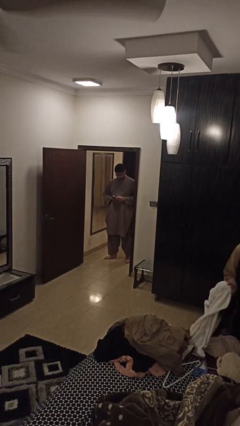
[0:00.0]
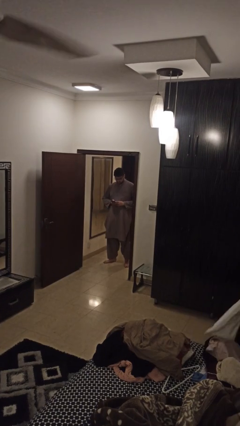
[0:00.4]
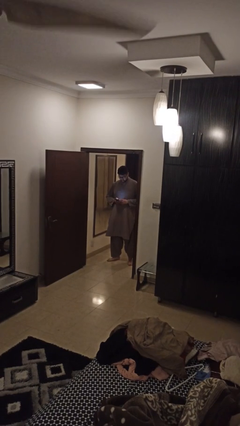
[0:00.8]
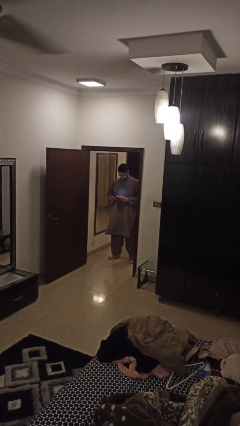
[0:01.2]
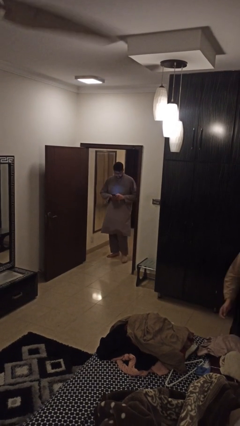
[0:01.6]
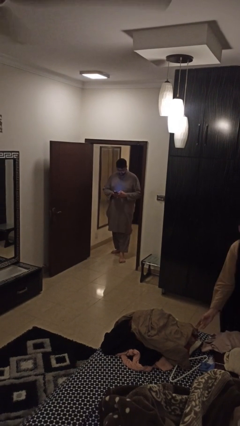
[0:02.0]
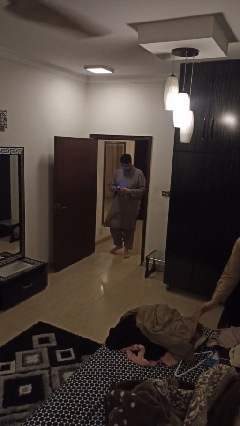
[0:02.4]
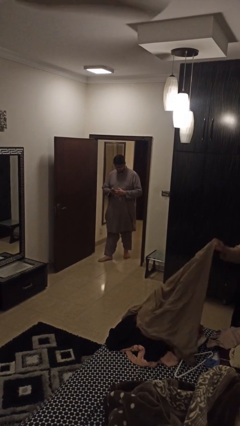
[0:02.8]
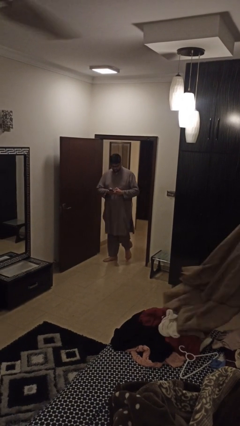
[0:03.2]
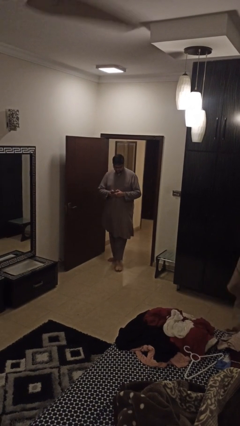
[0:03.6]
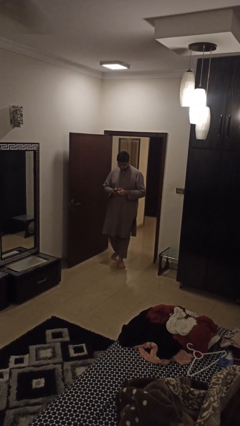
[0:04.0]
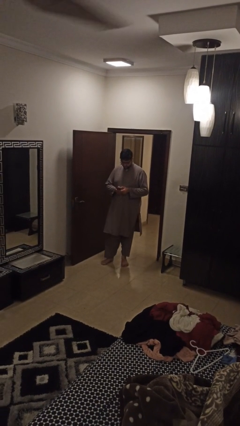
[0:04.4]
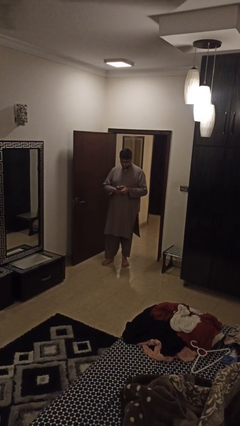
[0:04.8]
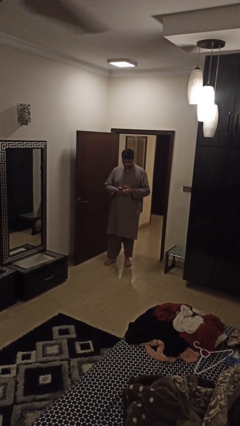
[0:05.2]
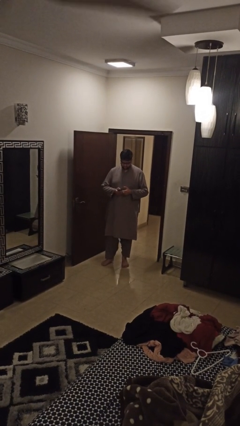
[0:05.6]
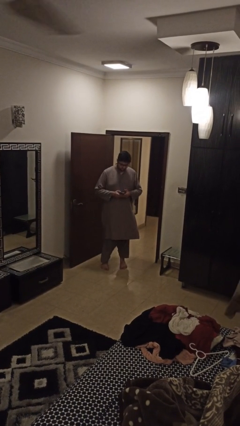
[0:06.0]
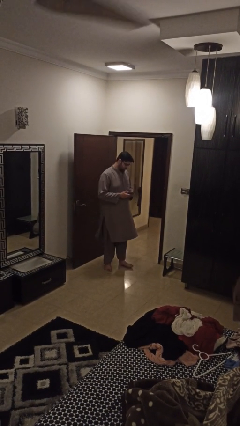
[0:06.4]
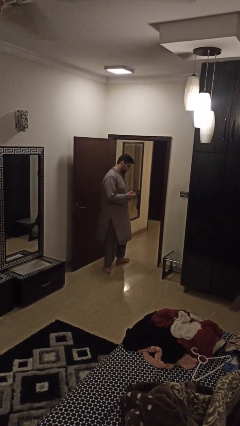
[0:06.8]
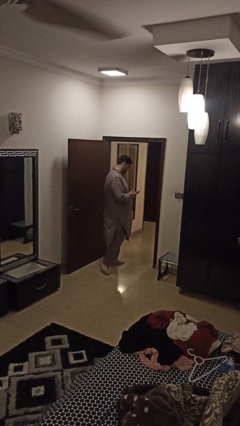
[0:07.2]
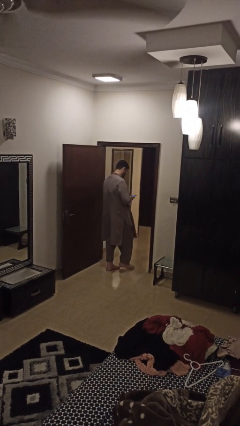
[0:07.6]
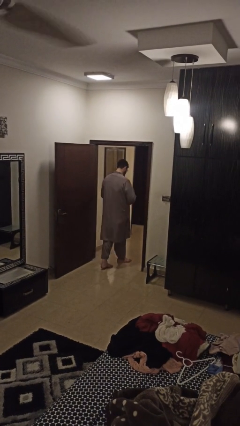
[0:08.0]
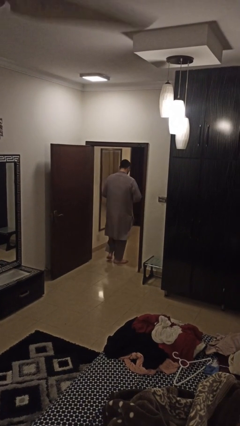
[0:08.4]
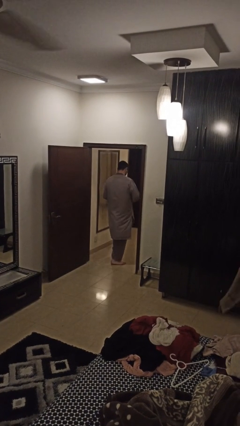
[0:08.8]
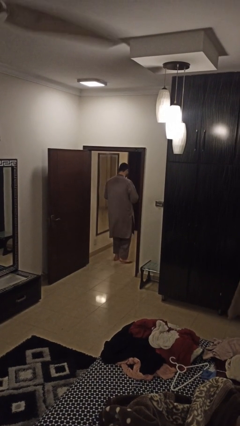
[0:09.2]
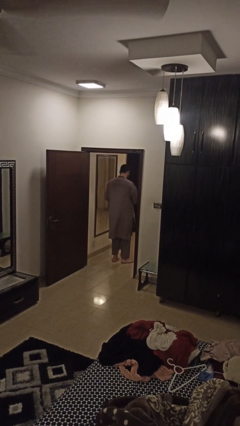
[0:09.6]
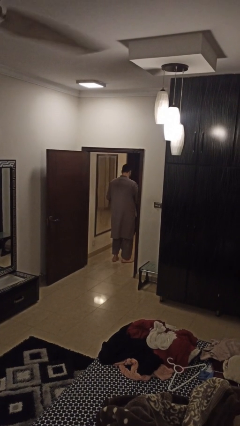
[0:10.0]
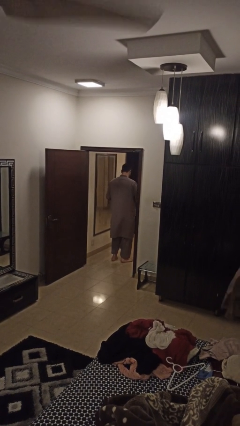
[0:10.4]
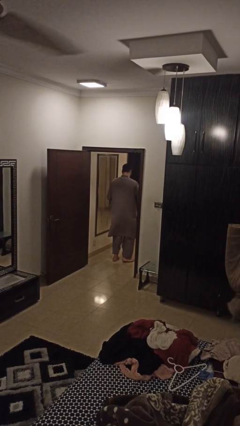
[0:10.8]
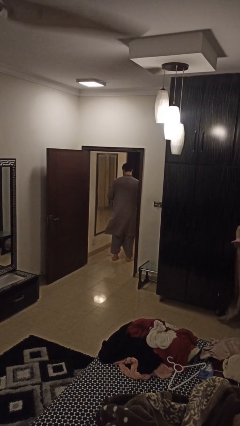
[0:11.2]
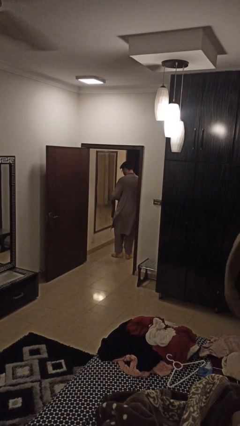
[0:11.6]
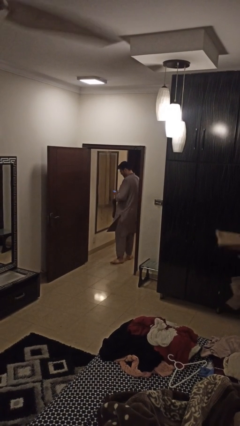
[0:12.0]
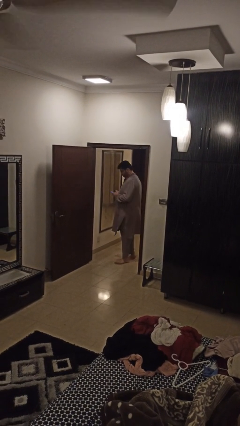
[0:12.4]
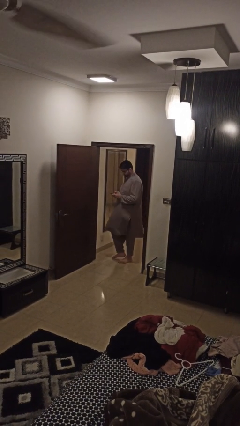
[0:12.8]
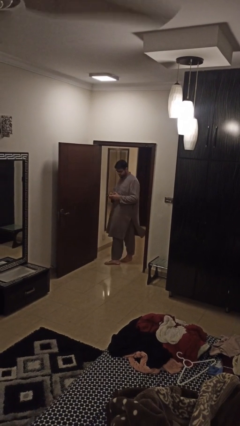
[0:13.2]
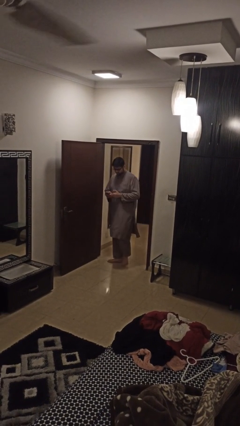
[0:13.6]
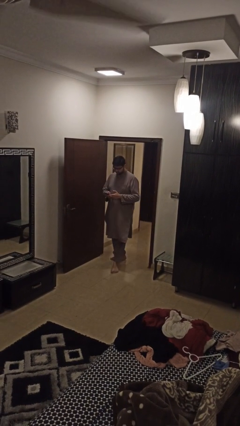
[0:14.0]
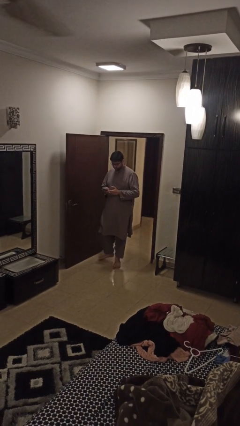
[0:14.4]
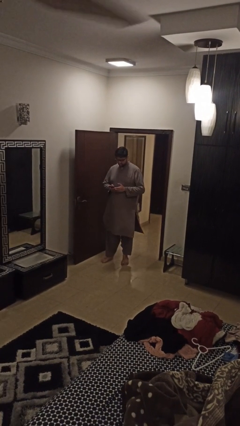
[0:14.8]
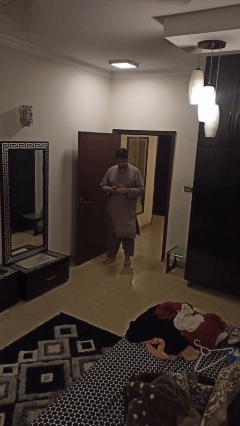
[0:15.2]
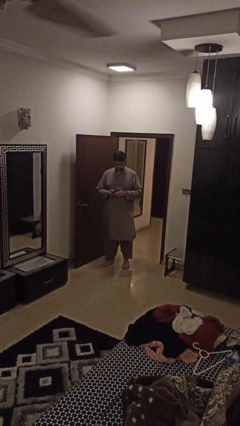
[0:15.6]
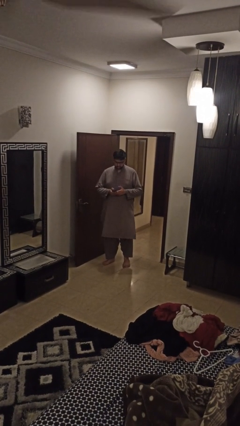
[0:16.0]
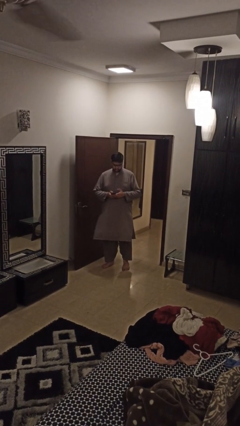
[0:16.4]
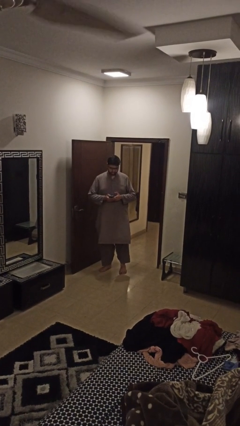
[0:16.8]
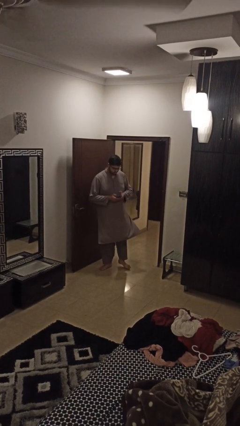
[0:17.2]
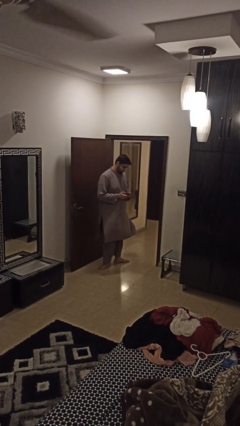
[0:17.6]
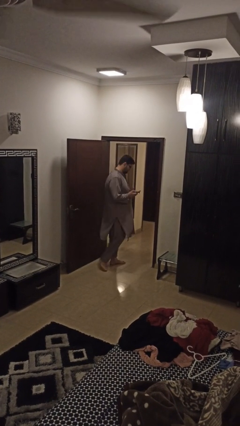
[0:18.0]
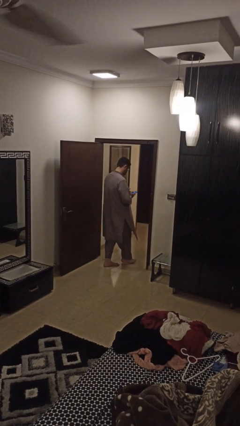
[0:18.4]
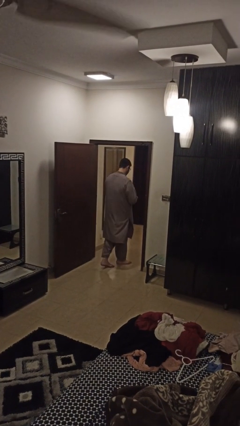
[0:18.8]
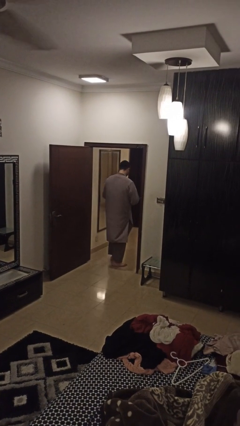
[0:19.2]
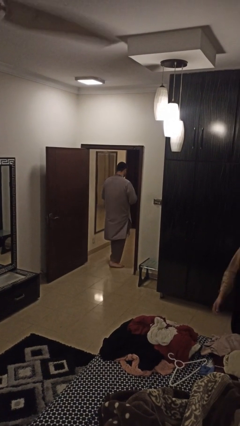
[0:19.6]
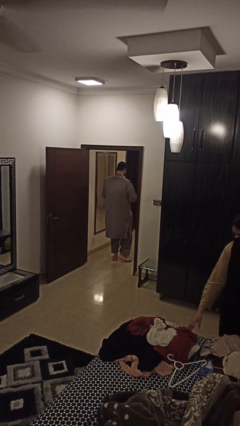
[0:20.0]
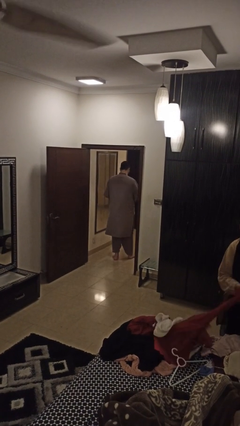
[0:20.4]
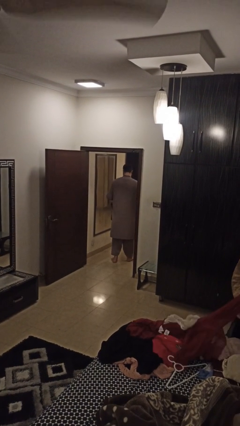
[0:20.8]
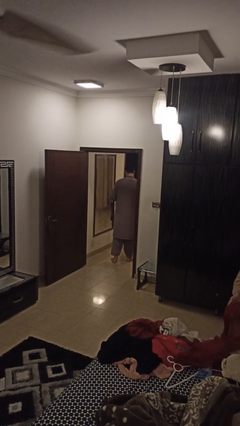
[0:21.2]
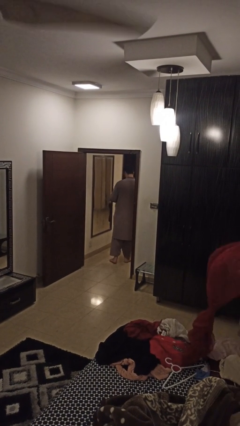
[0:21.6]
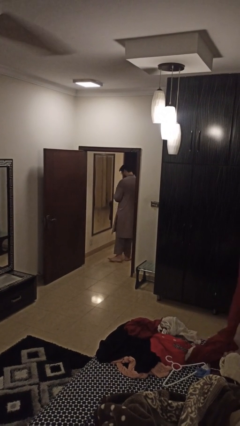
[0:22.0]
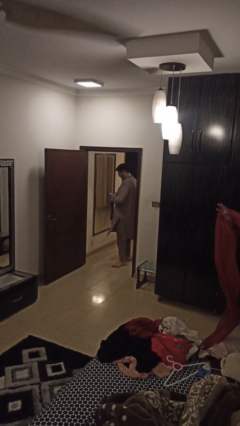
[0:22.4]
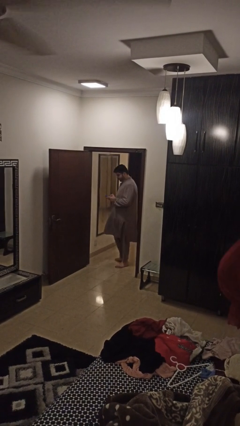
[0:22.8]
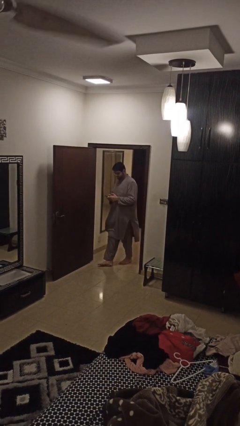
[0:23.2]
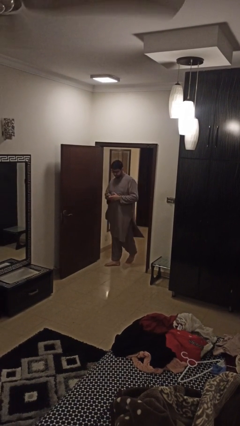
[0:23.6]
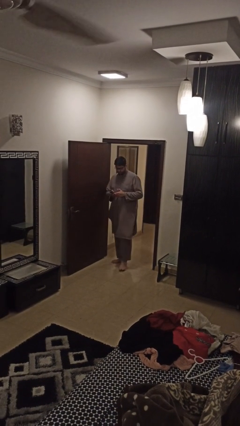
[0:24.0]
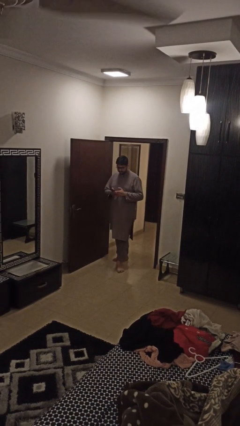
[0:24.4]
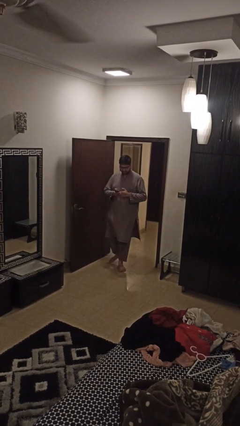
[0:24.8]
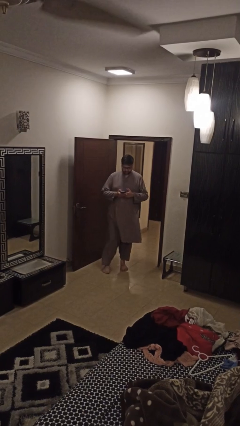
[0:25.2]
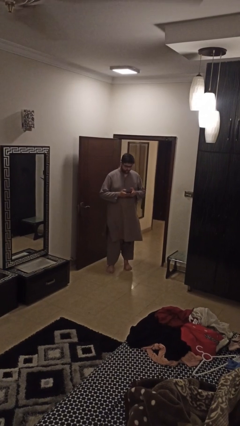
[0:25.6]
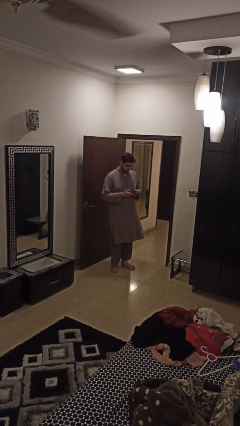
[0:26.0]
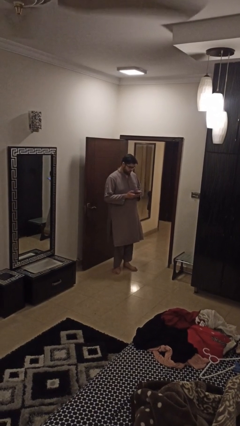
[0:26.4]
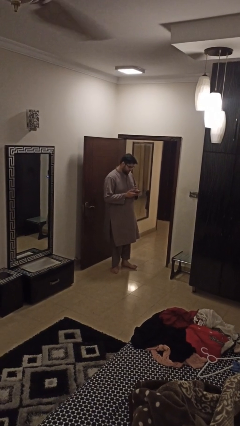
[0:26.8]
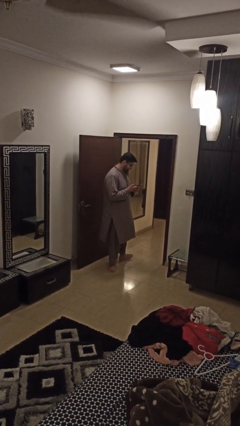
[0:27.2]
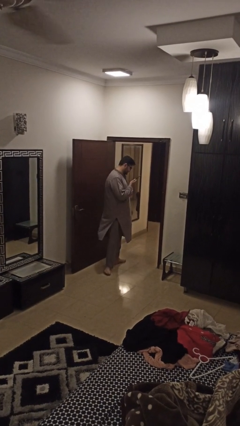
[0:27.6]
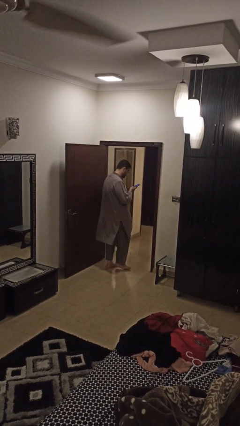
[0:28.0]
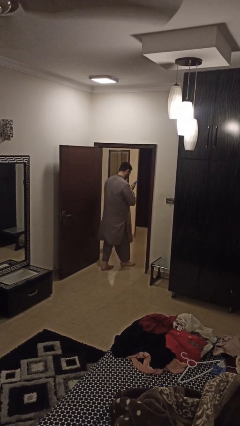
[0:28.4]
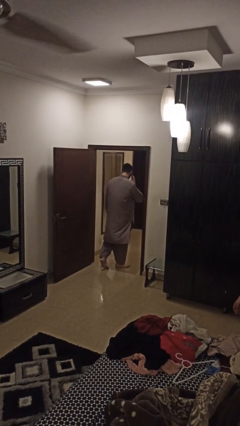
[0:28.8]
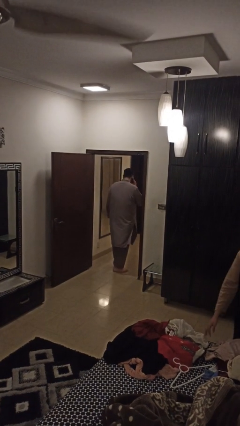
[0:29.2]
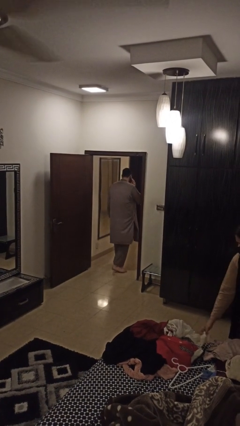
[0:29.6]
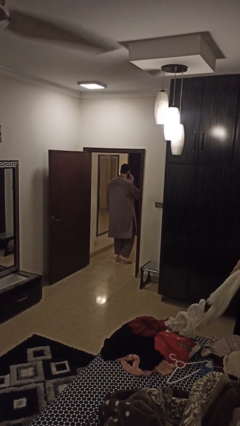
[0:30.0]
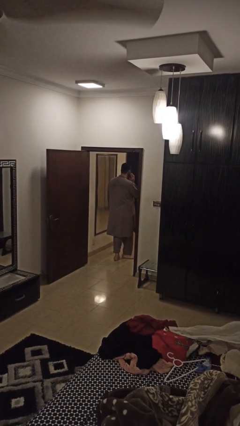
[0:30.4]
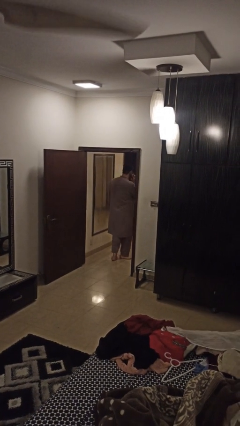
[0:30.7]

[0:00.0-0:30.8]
person texts on phone

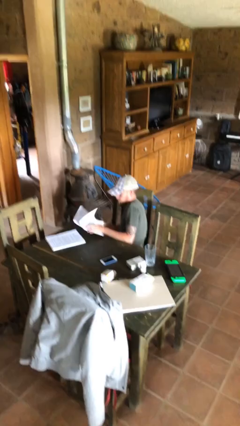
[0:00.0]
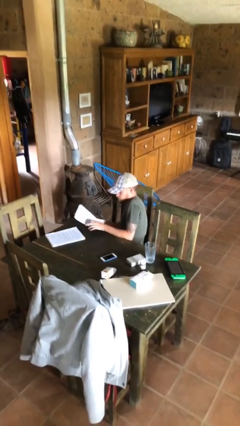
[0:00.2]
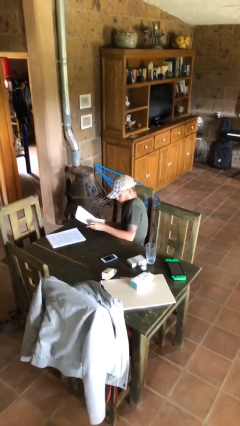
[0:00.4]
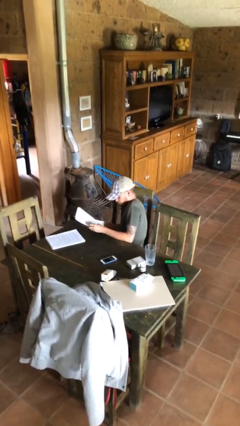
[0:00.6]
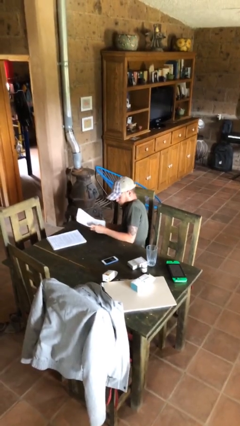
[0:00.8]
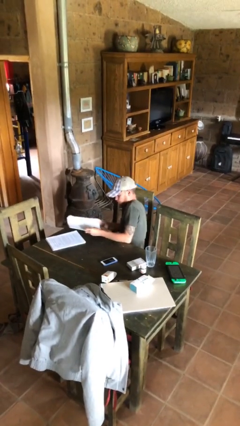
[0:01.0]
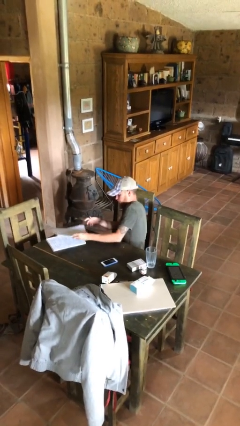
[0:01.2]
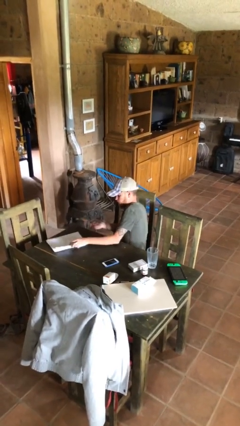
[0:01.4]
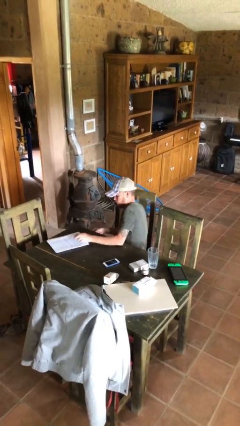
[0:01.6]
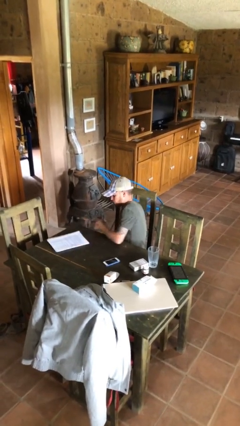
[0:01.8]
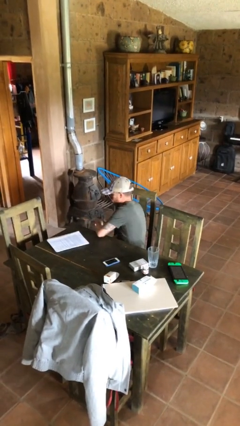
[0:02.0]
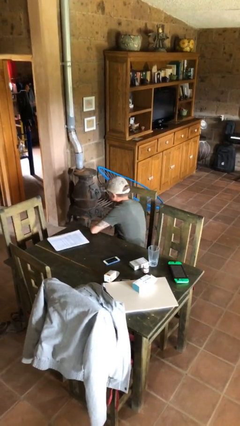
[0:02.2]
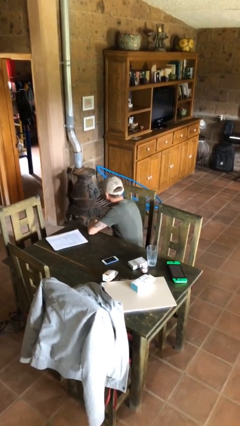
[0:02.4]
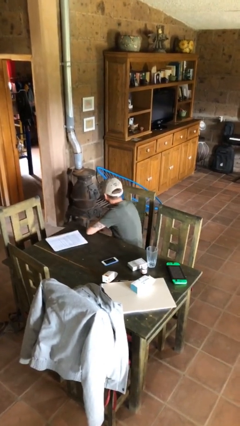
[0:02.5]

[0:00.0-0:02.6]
person puts down object on table
